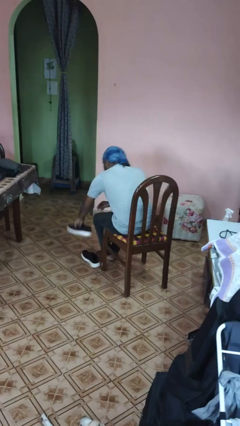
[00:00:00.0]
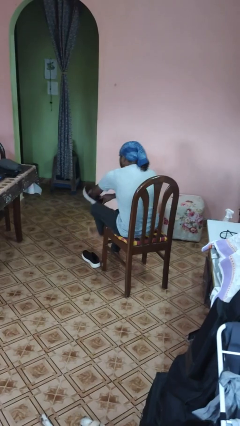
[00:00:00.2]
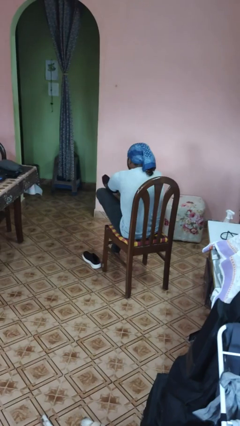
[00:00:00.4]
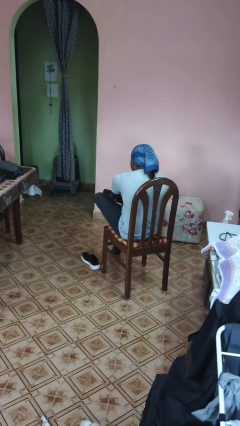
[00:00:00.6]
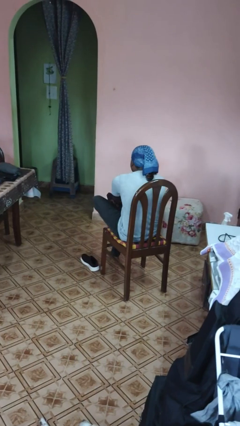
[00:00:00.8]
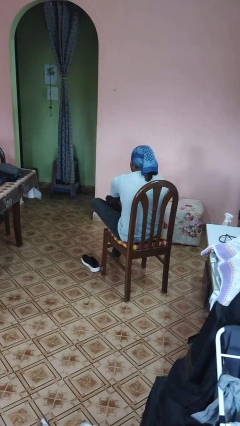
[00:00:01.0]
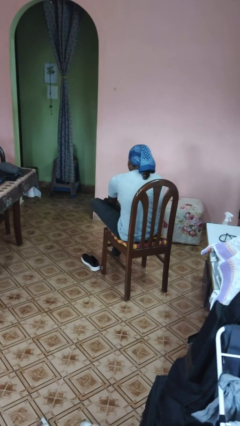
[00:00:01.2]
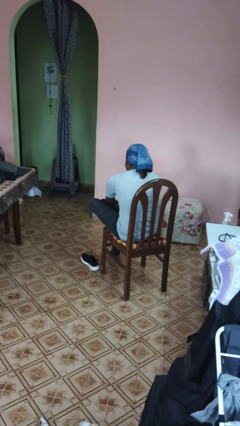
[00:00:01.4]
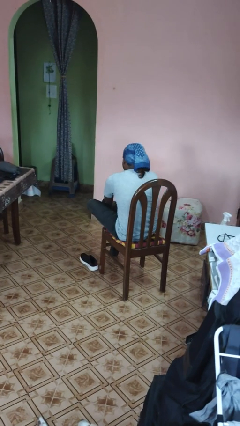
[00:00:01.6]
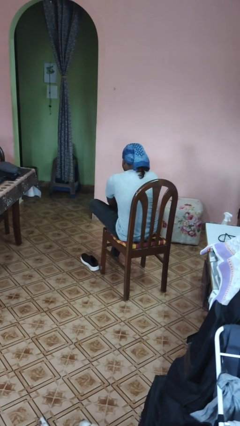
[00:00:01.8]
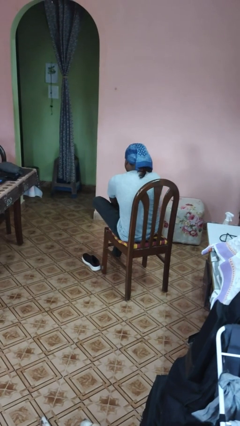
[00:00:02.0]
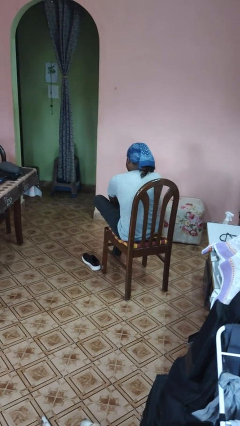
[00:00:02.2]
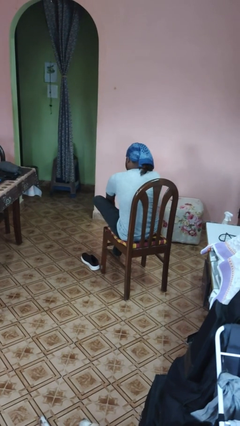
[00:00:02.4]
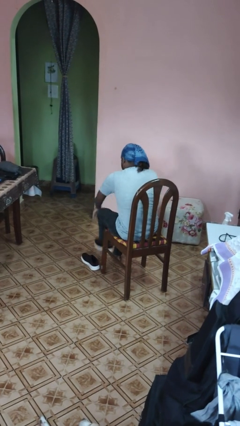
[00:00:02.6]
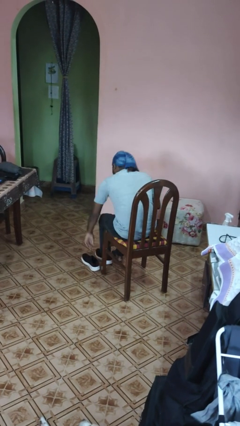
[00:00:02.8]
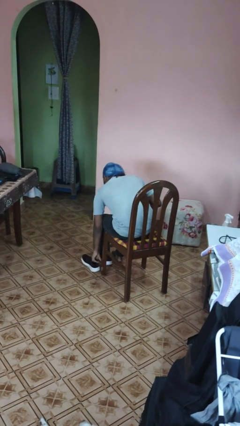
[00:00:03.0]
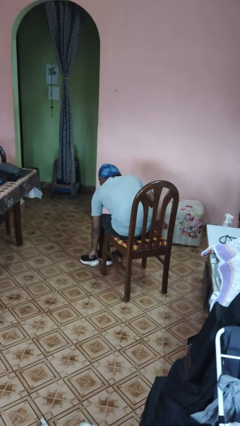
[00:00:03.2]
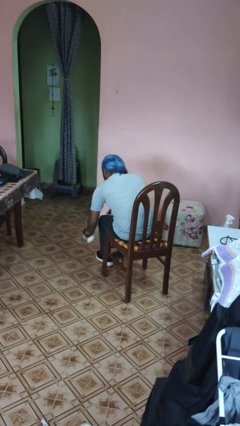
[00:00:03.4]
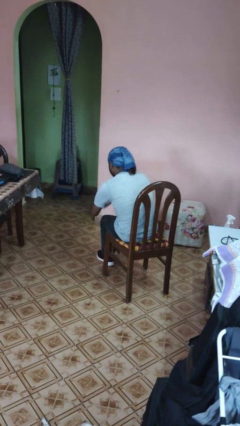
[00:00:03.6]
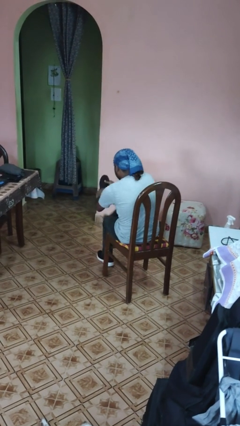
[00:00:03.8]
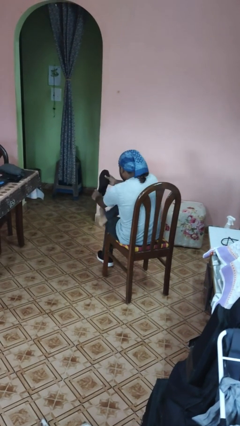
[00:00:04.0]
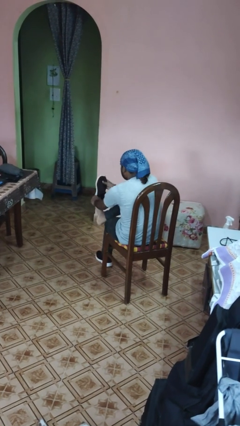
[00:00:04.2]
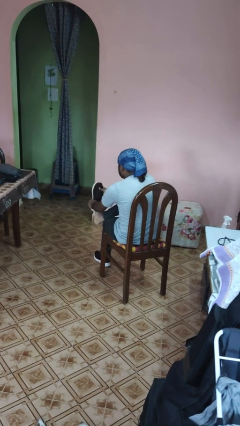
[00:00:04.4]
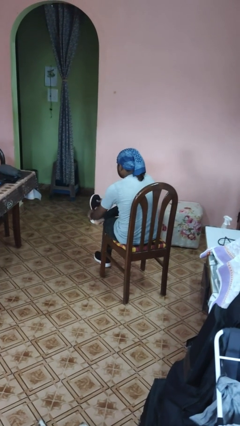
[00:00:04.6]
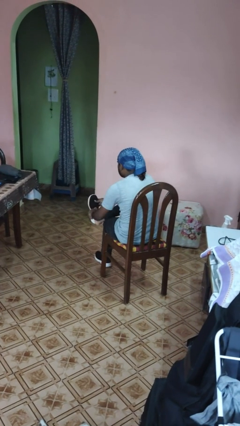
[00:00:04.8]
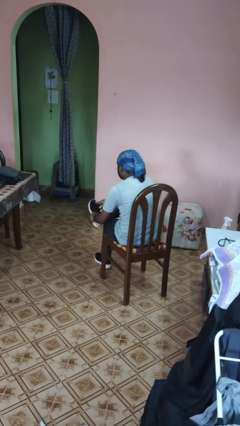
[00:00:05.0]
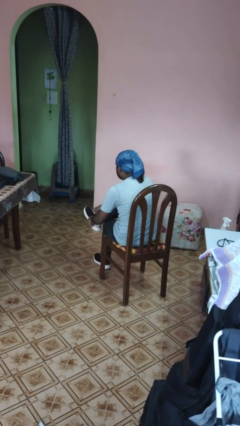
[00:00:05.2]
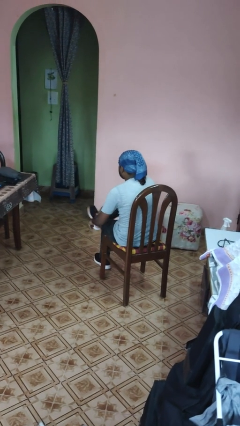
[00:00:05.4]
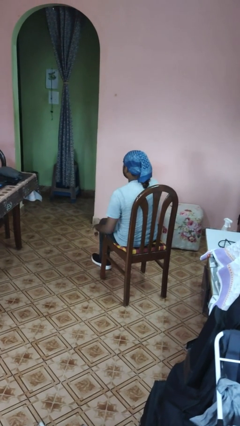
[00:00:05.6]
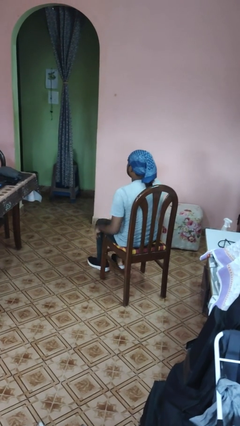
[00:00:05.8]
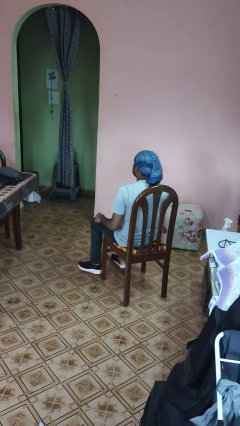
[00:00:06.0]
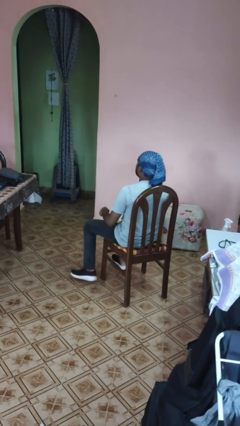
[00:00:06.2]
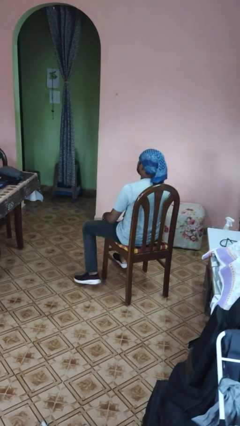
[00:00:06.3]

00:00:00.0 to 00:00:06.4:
person puts on shoes

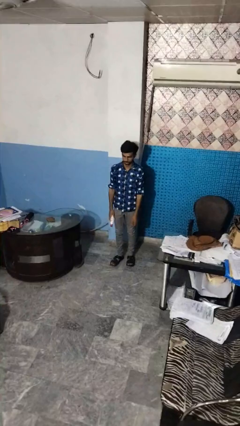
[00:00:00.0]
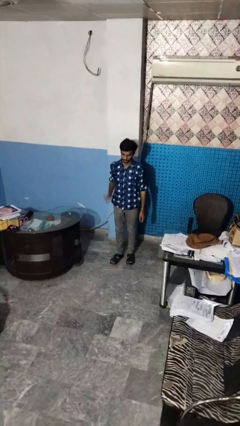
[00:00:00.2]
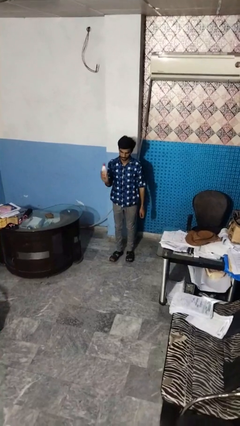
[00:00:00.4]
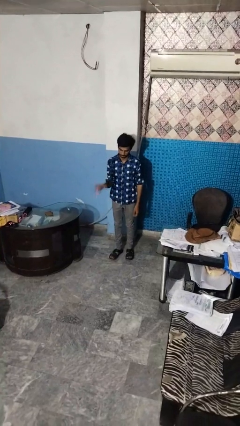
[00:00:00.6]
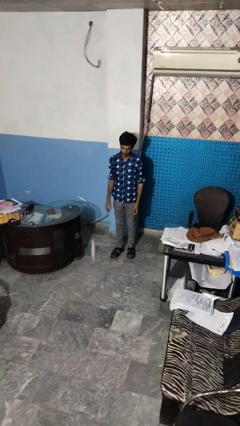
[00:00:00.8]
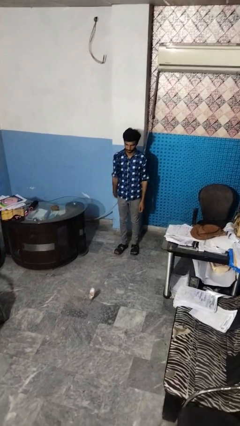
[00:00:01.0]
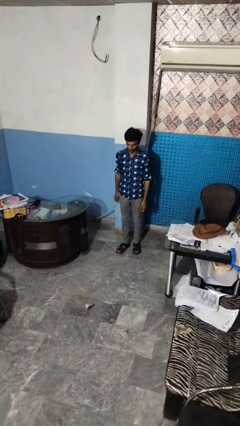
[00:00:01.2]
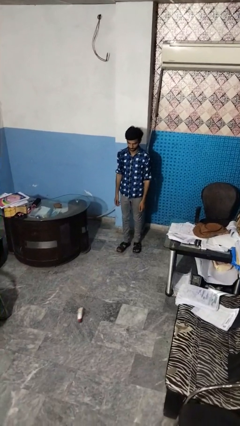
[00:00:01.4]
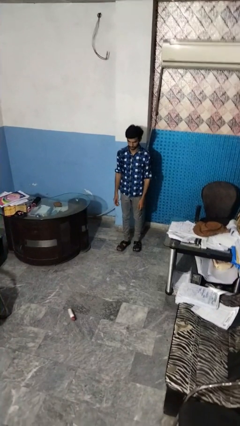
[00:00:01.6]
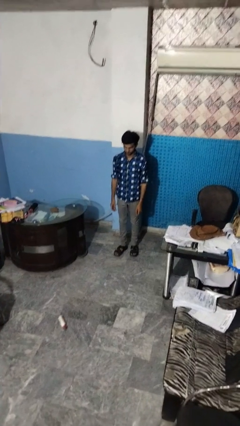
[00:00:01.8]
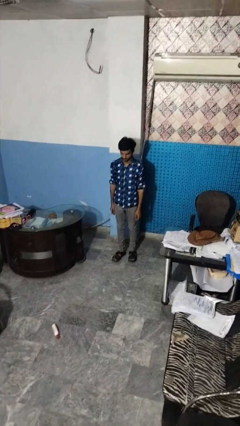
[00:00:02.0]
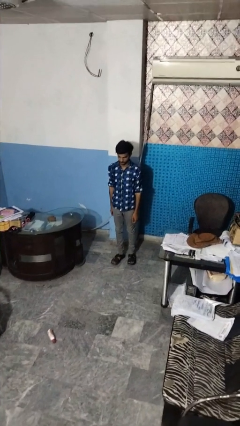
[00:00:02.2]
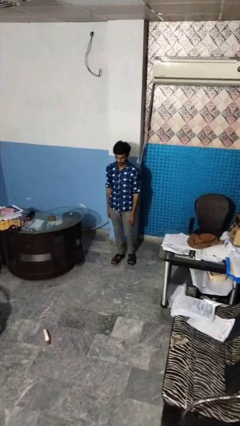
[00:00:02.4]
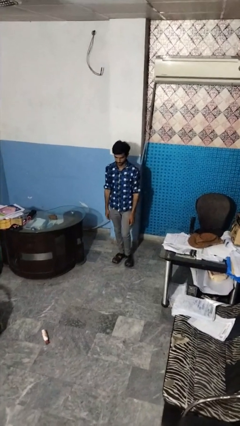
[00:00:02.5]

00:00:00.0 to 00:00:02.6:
person throws object to ground

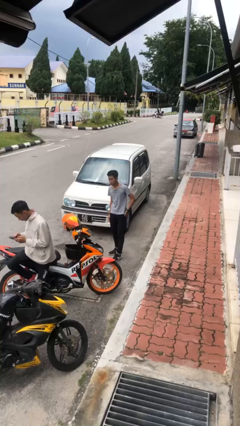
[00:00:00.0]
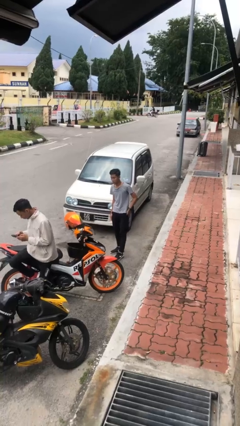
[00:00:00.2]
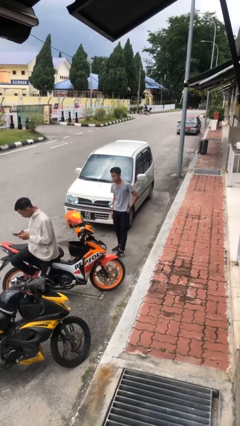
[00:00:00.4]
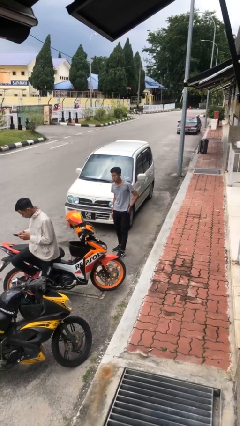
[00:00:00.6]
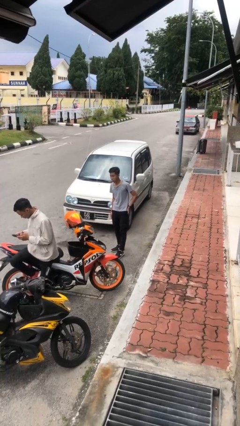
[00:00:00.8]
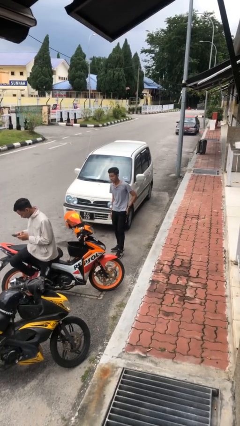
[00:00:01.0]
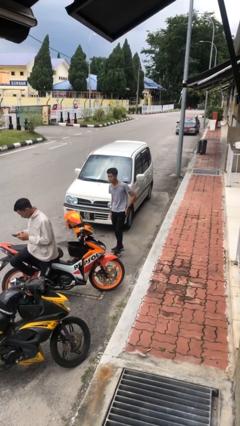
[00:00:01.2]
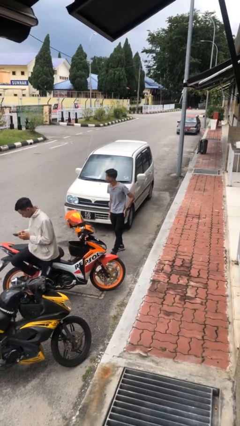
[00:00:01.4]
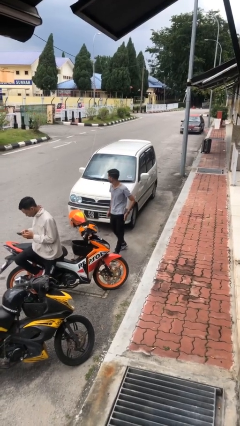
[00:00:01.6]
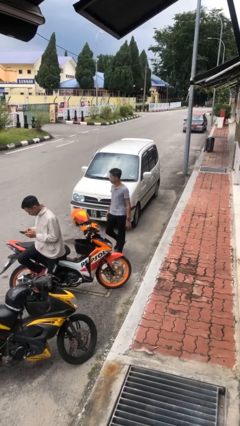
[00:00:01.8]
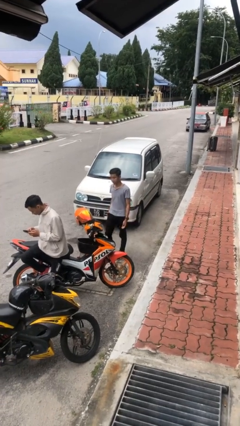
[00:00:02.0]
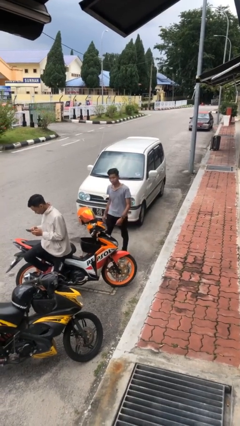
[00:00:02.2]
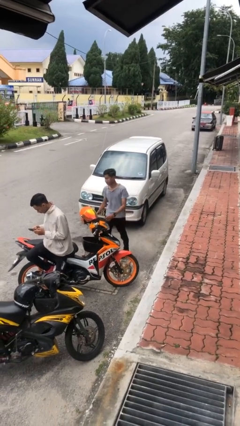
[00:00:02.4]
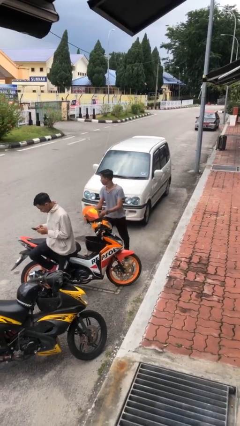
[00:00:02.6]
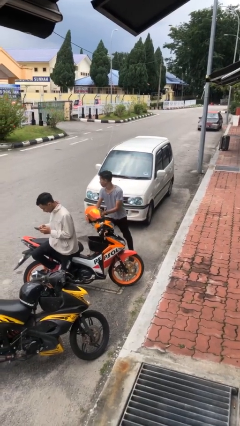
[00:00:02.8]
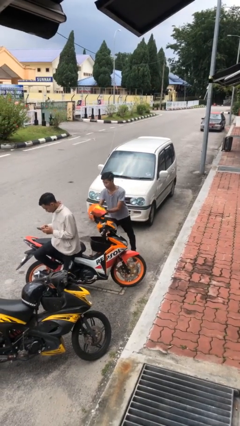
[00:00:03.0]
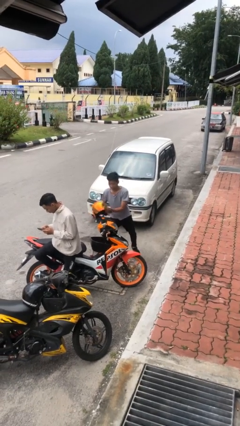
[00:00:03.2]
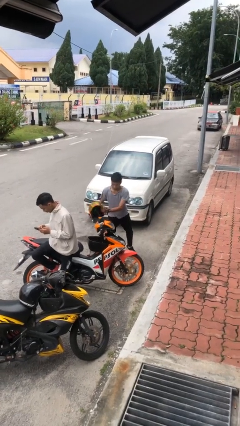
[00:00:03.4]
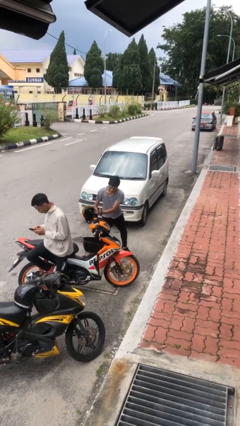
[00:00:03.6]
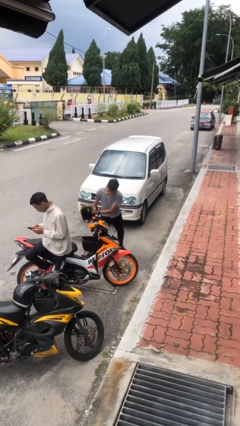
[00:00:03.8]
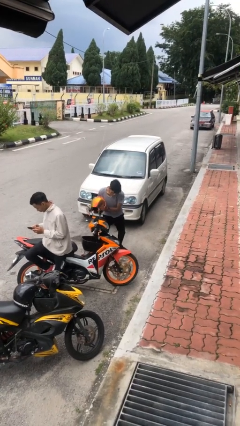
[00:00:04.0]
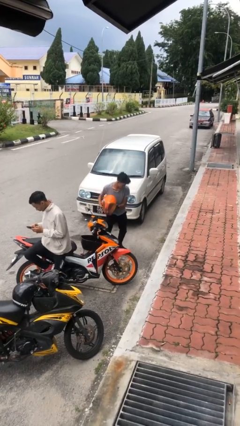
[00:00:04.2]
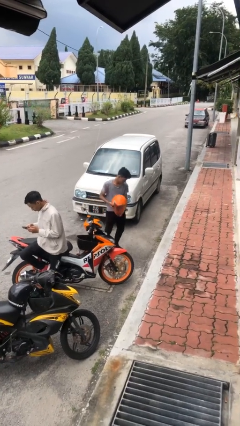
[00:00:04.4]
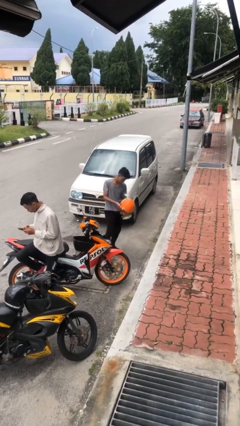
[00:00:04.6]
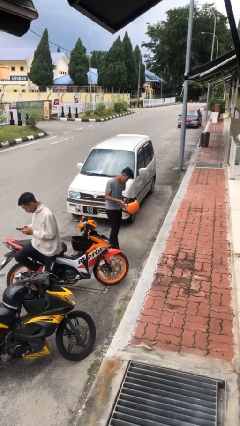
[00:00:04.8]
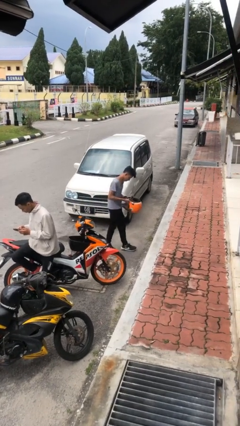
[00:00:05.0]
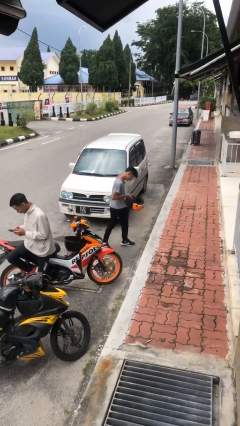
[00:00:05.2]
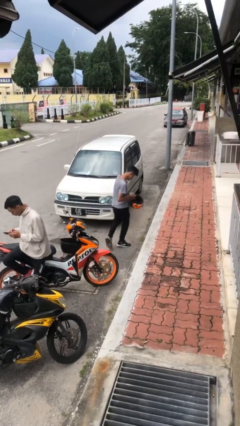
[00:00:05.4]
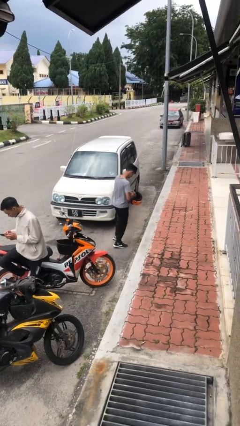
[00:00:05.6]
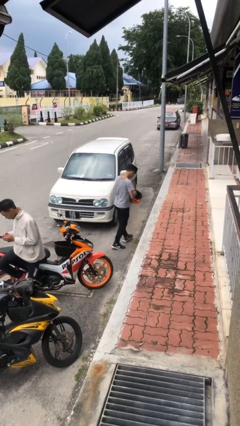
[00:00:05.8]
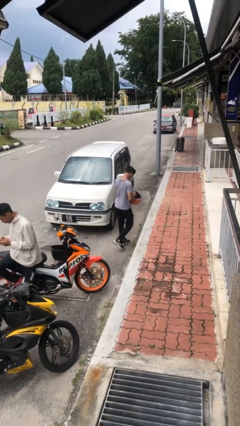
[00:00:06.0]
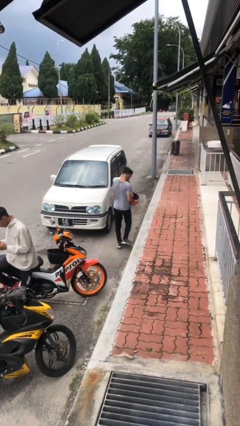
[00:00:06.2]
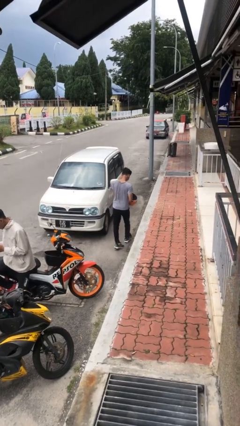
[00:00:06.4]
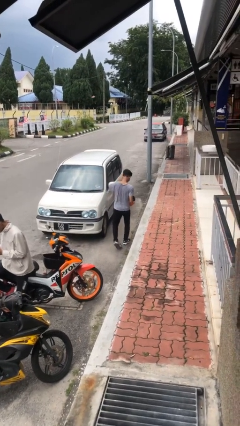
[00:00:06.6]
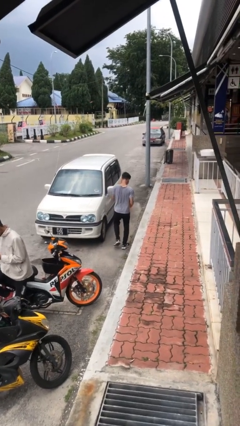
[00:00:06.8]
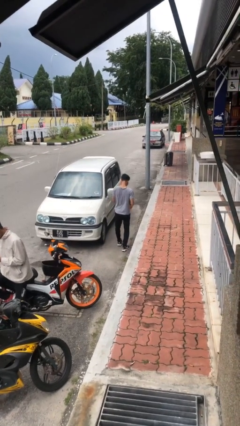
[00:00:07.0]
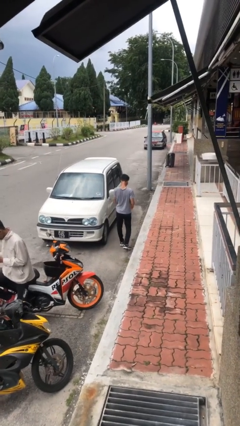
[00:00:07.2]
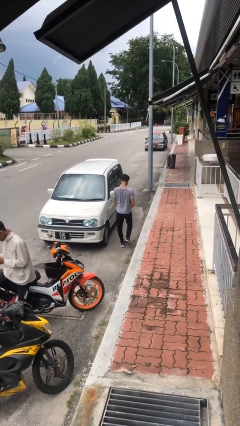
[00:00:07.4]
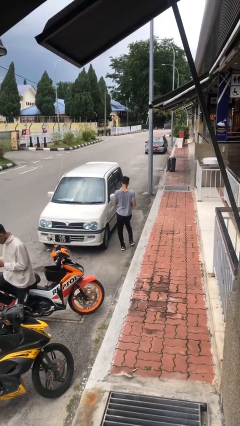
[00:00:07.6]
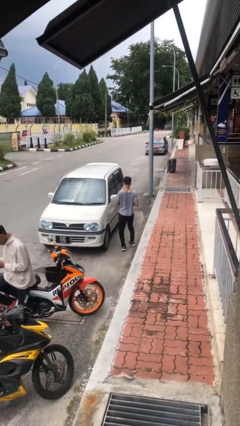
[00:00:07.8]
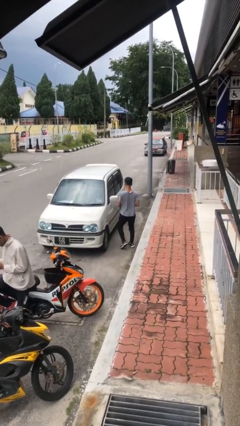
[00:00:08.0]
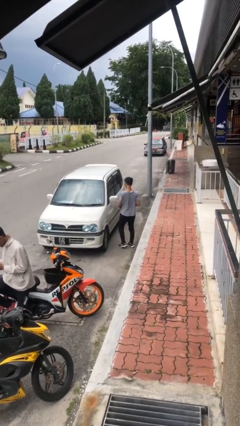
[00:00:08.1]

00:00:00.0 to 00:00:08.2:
person steals object from person

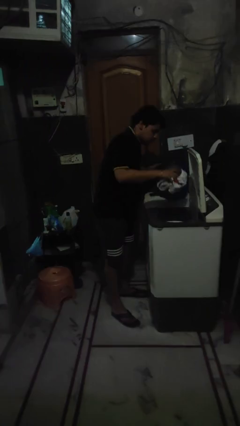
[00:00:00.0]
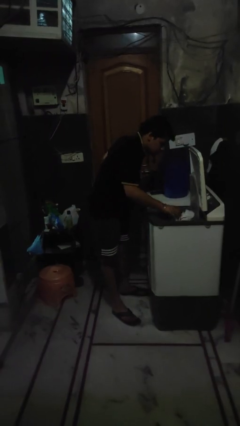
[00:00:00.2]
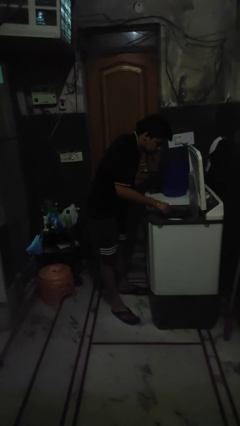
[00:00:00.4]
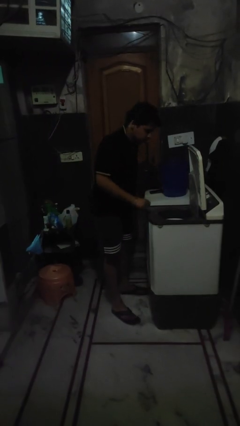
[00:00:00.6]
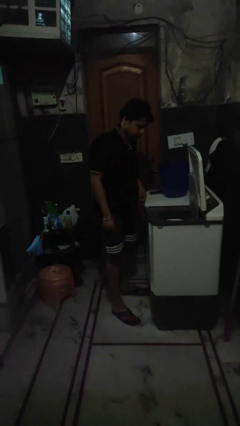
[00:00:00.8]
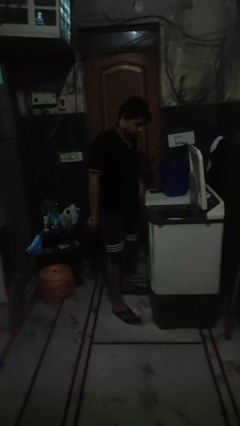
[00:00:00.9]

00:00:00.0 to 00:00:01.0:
person loads clotheswasher
